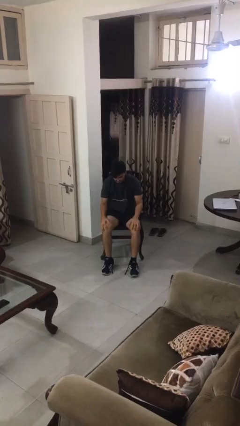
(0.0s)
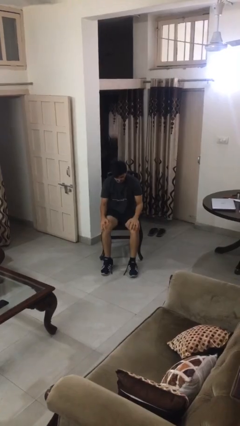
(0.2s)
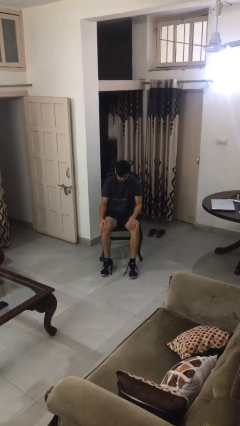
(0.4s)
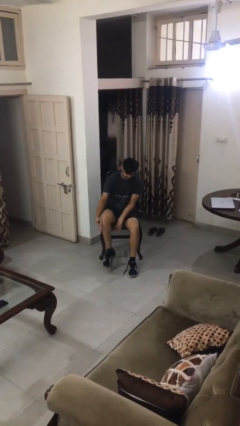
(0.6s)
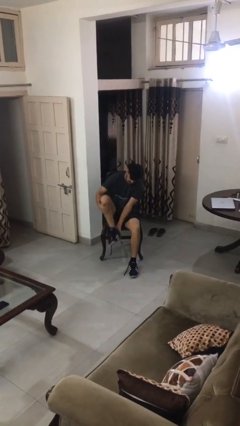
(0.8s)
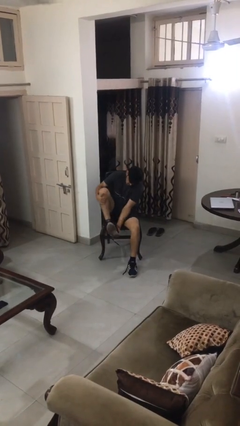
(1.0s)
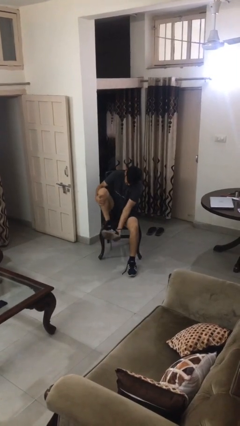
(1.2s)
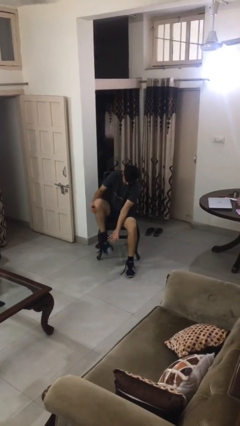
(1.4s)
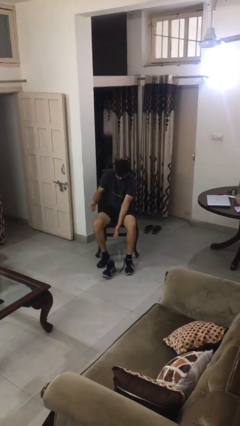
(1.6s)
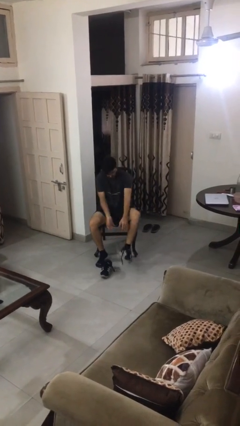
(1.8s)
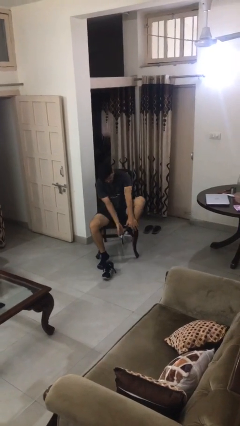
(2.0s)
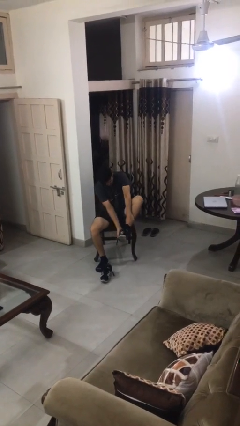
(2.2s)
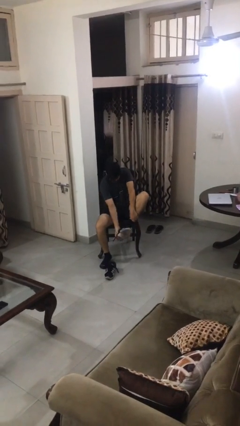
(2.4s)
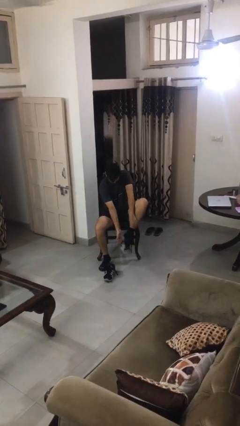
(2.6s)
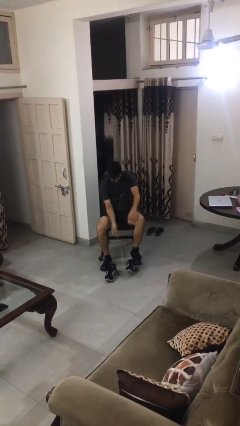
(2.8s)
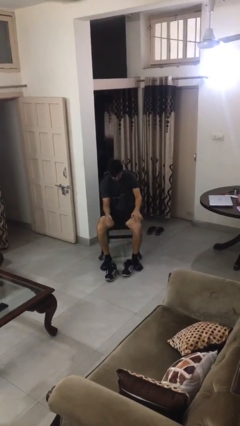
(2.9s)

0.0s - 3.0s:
person takes off shoes

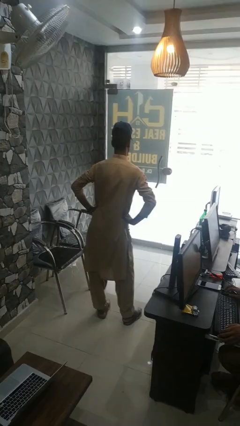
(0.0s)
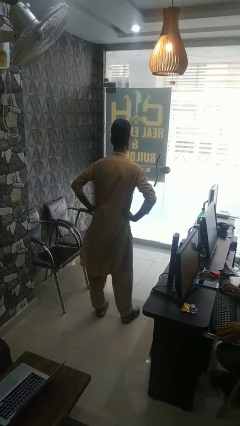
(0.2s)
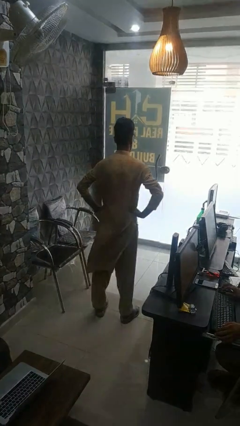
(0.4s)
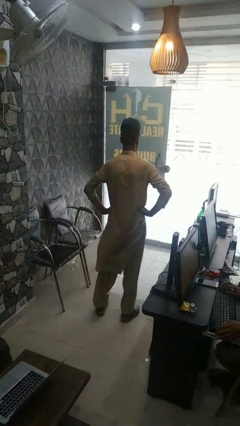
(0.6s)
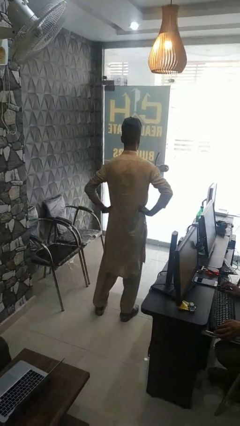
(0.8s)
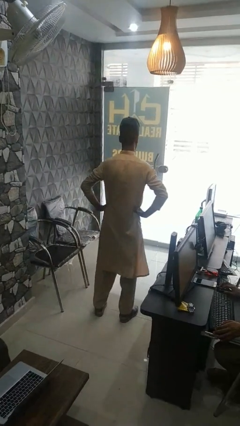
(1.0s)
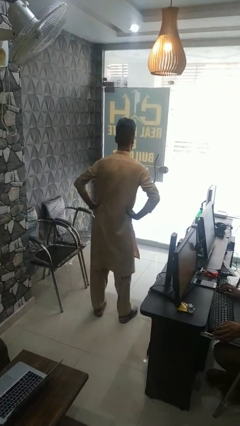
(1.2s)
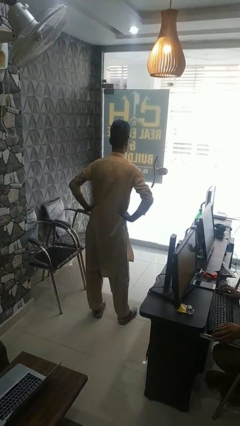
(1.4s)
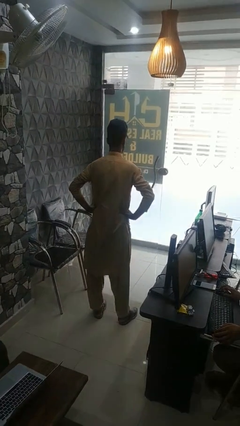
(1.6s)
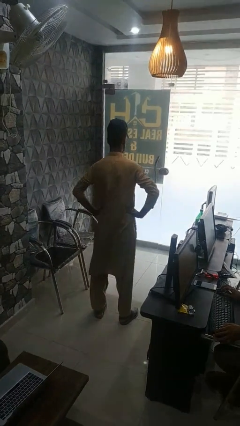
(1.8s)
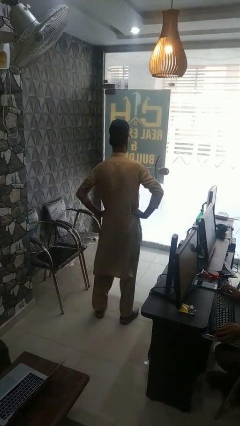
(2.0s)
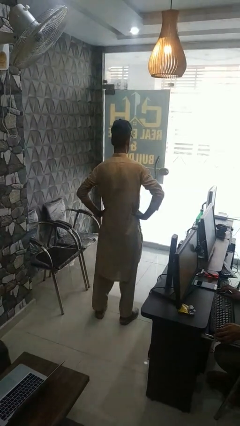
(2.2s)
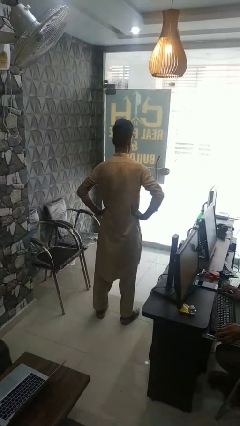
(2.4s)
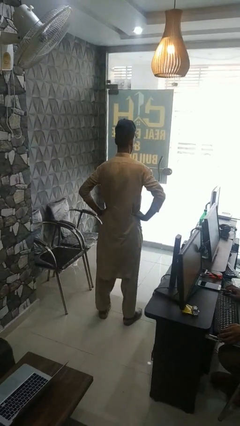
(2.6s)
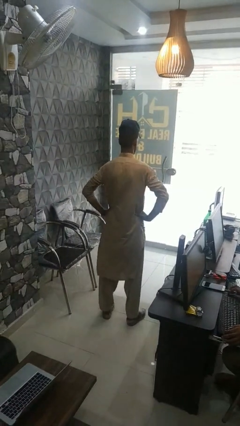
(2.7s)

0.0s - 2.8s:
person wiggles hips

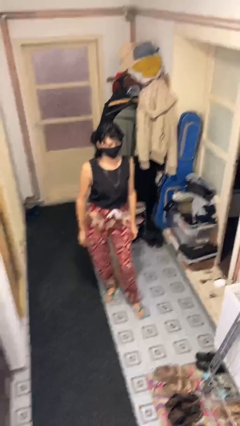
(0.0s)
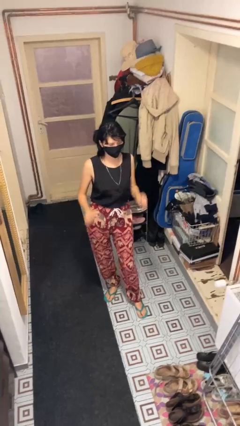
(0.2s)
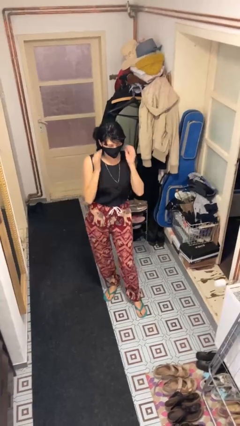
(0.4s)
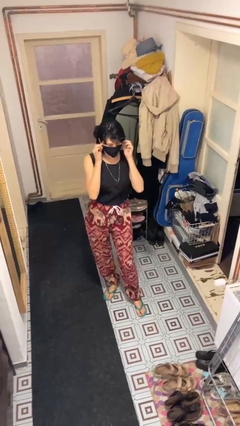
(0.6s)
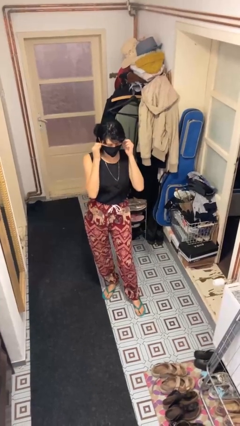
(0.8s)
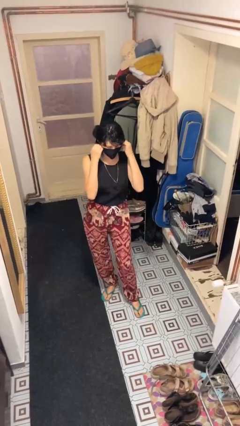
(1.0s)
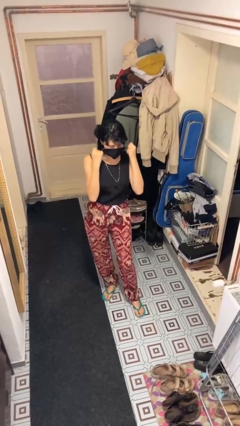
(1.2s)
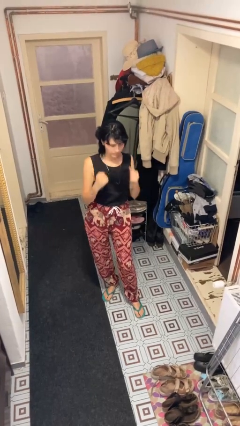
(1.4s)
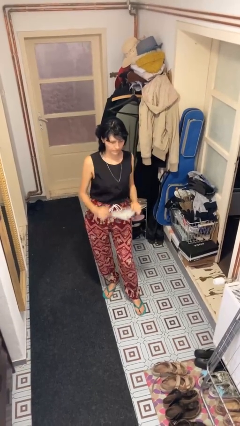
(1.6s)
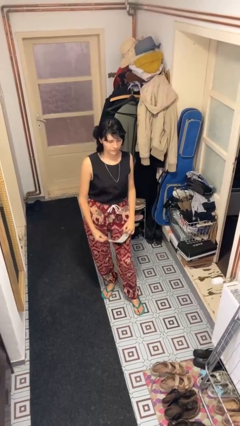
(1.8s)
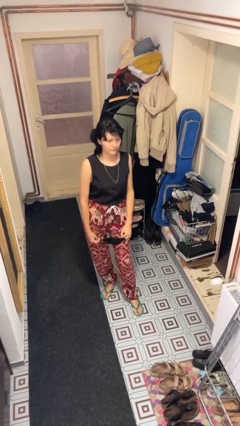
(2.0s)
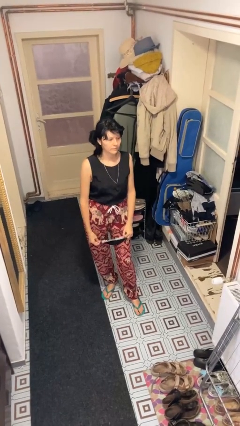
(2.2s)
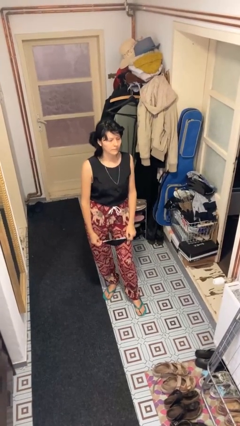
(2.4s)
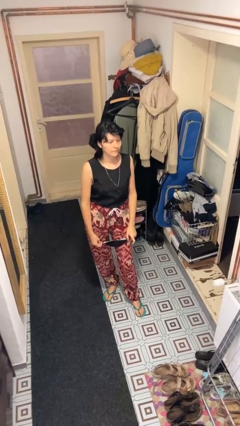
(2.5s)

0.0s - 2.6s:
person takes off facemask

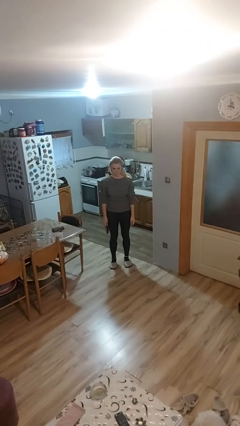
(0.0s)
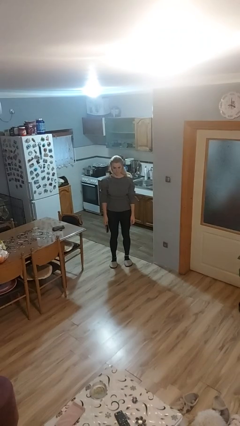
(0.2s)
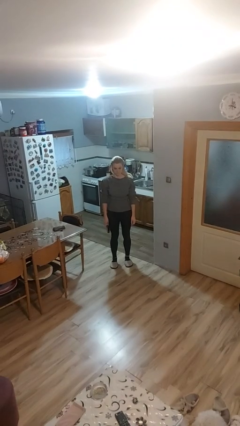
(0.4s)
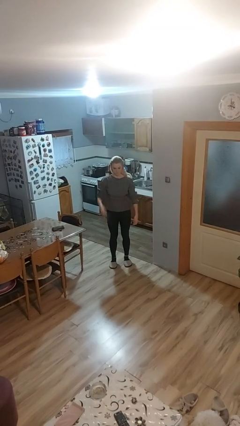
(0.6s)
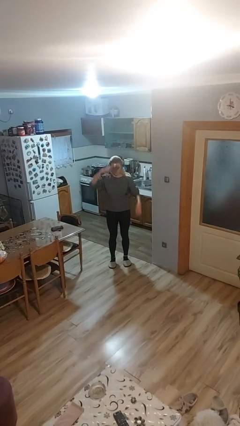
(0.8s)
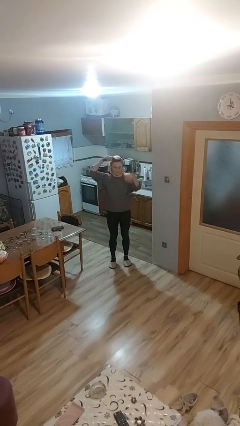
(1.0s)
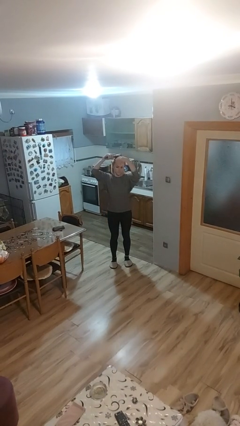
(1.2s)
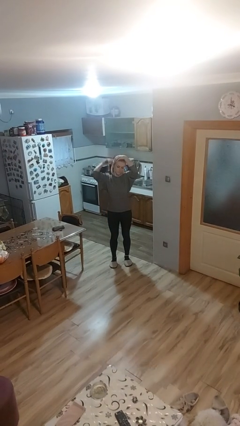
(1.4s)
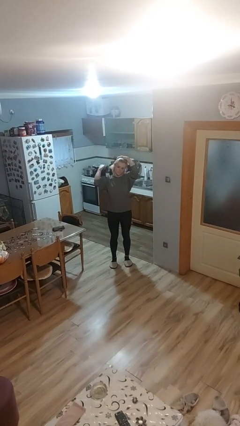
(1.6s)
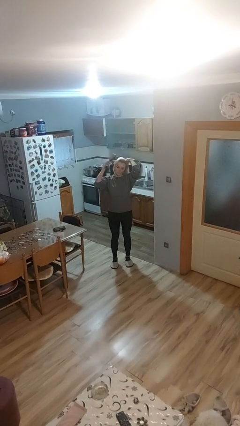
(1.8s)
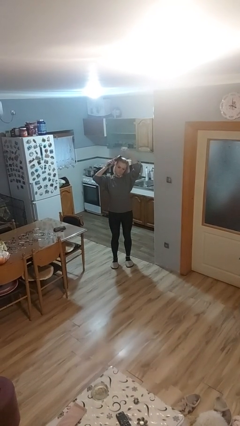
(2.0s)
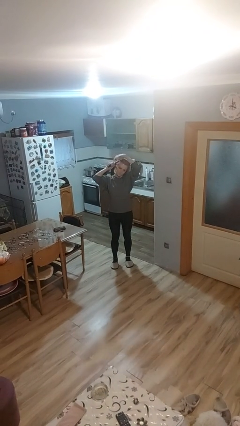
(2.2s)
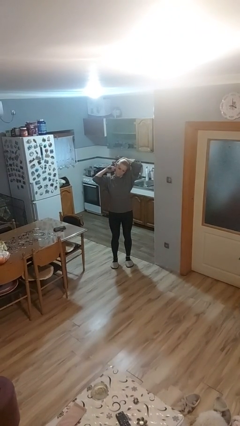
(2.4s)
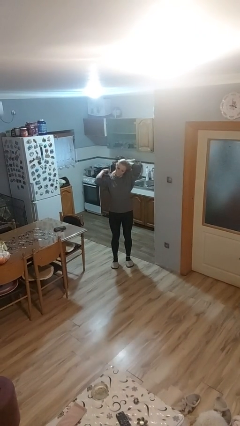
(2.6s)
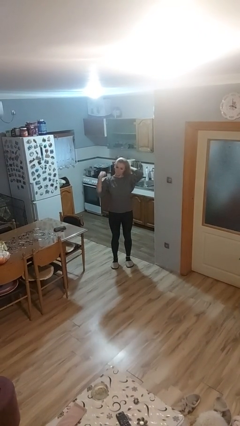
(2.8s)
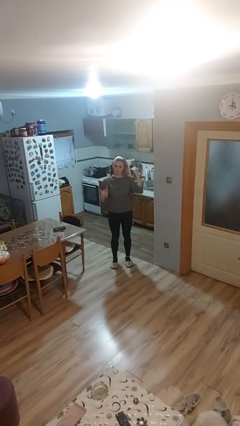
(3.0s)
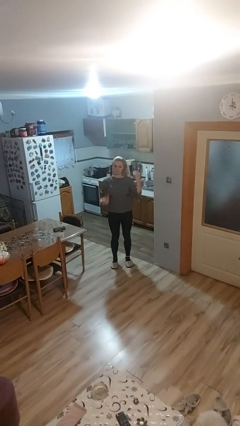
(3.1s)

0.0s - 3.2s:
person brushes hair

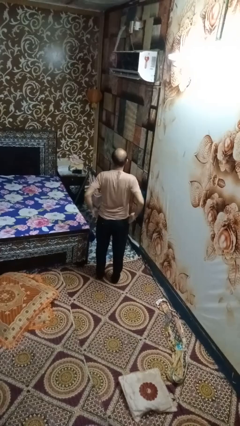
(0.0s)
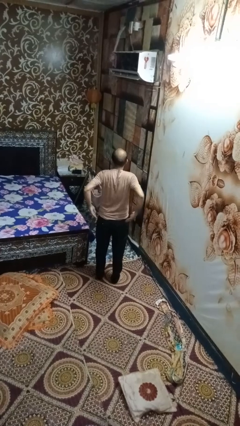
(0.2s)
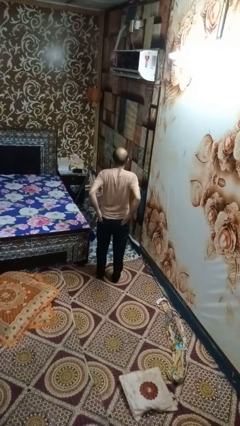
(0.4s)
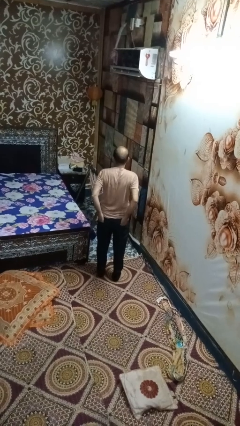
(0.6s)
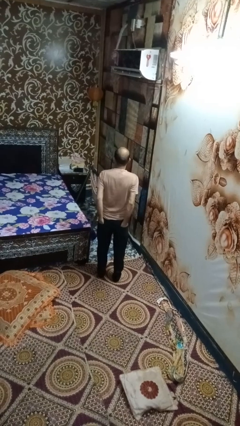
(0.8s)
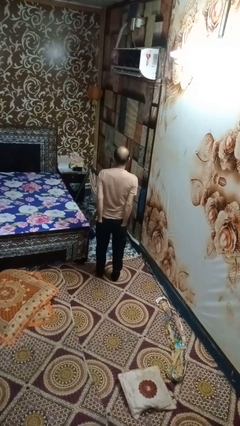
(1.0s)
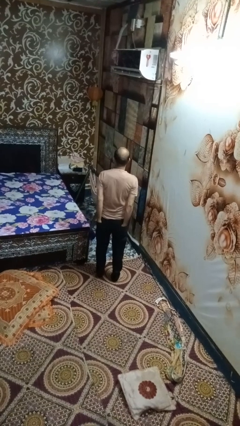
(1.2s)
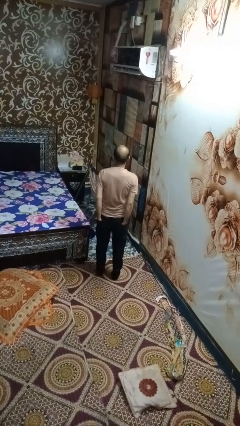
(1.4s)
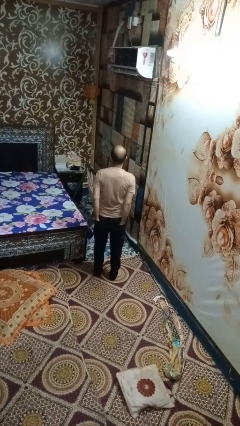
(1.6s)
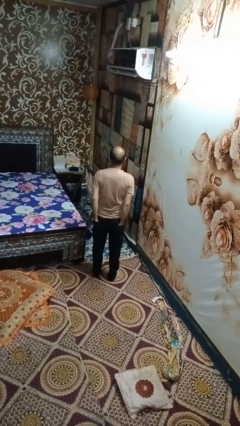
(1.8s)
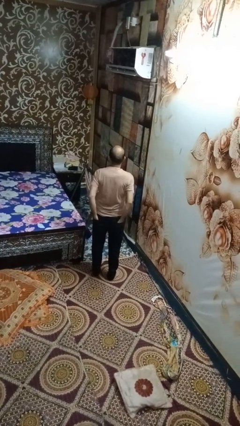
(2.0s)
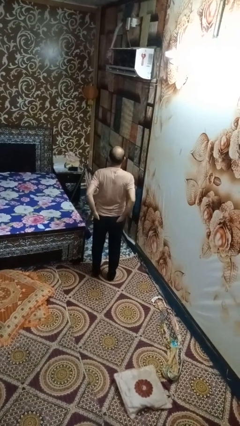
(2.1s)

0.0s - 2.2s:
person puts hands in back pockets

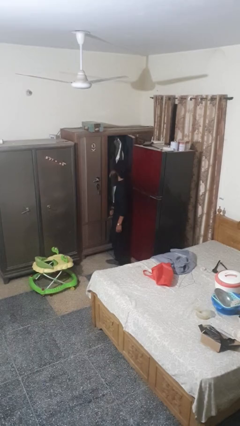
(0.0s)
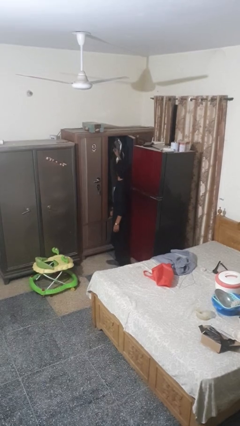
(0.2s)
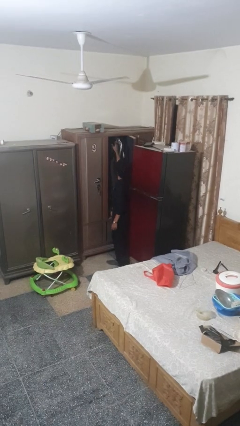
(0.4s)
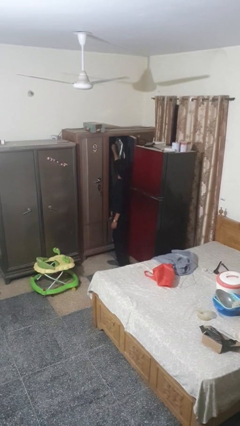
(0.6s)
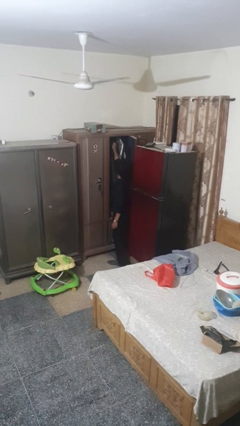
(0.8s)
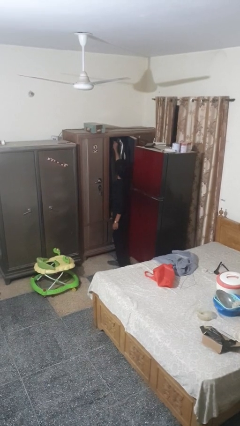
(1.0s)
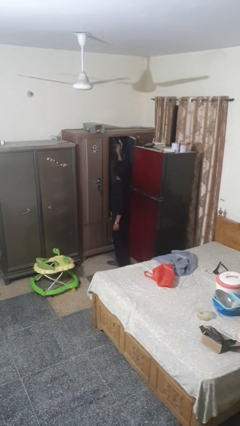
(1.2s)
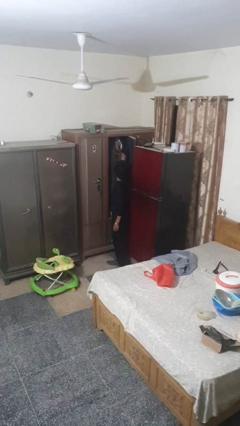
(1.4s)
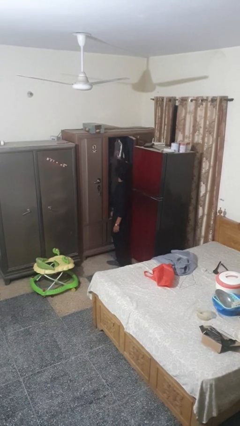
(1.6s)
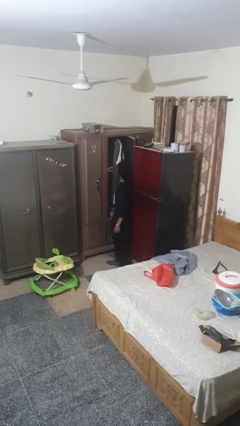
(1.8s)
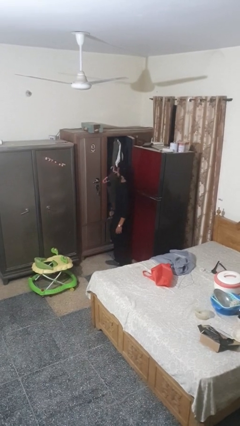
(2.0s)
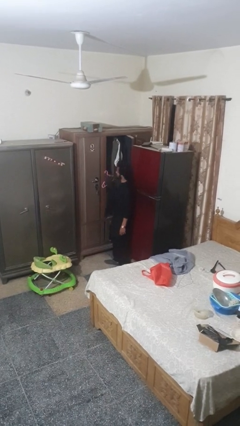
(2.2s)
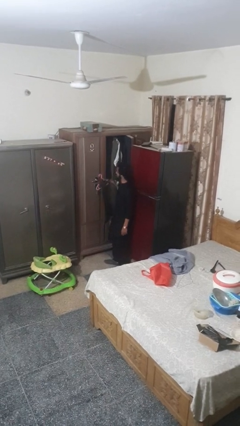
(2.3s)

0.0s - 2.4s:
person takes clothes from closet

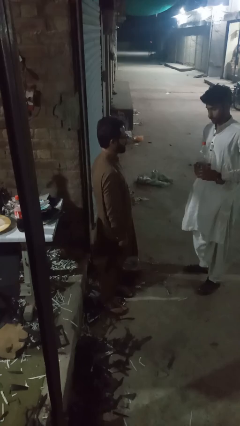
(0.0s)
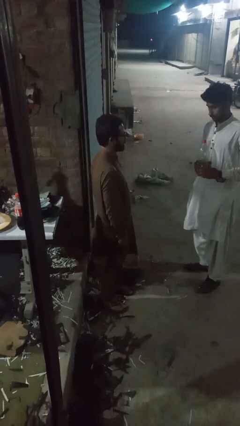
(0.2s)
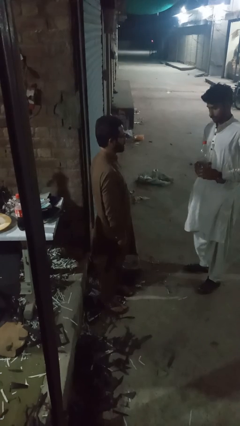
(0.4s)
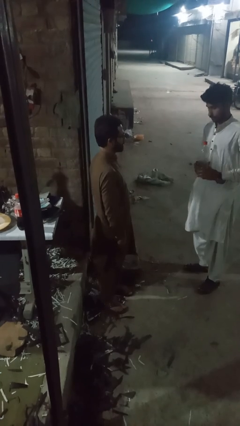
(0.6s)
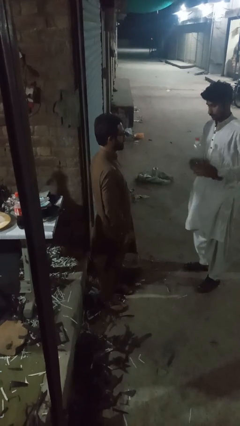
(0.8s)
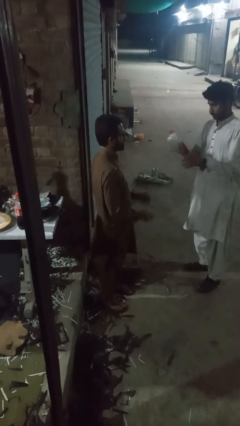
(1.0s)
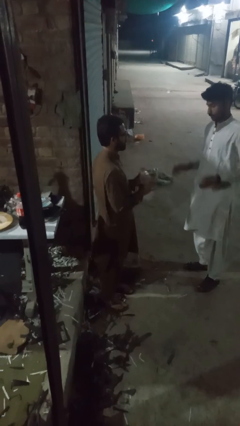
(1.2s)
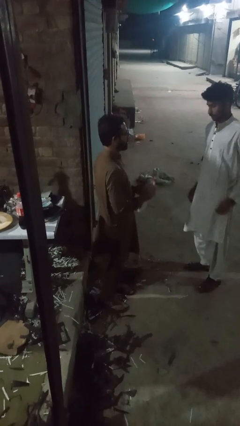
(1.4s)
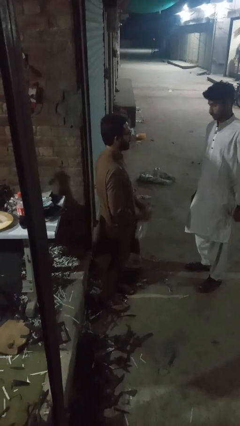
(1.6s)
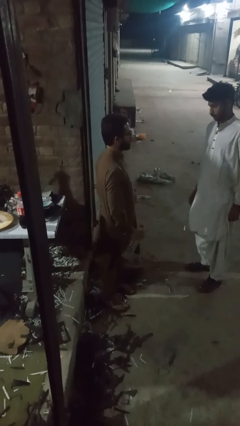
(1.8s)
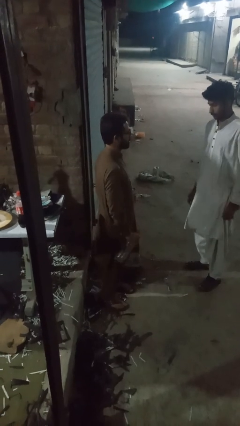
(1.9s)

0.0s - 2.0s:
person catches object from person
